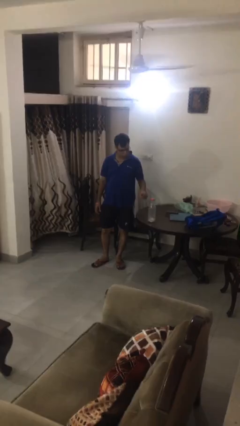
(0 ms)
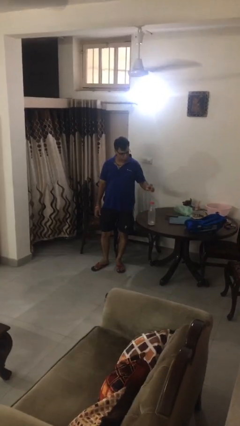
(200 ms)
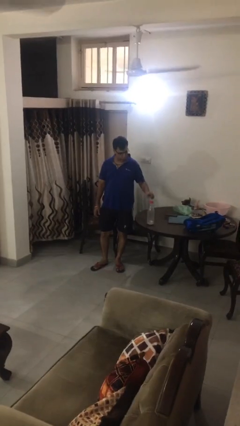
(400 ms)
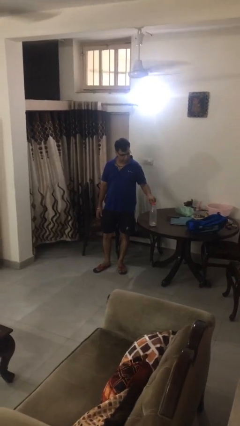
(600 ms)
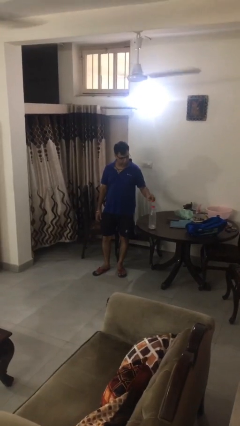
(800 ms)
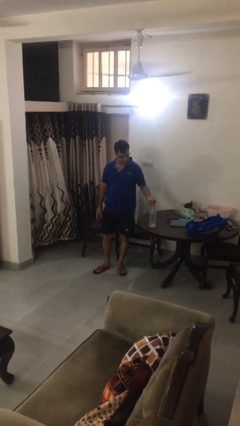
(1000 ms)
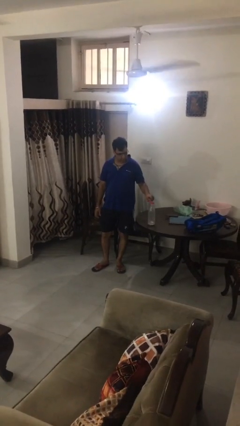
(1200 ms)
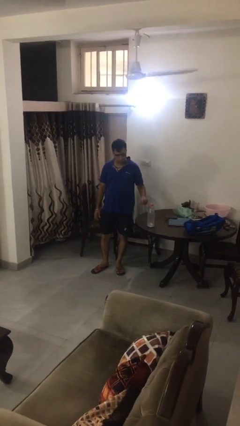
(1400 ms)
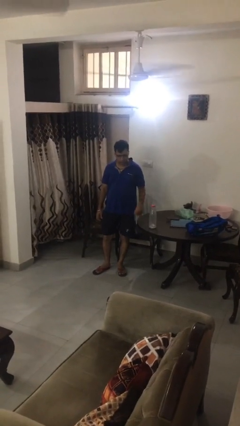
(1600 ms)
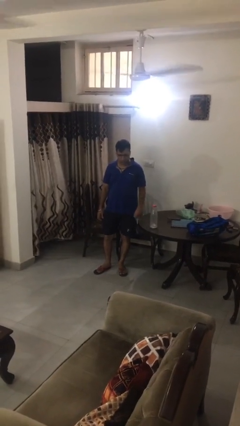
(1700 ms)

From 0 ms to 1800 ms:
person taps object with finger

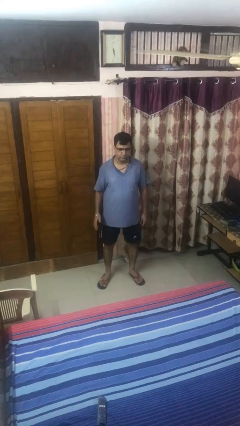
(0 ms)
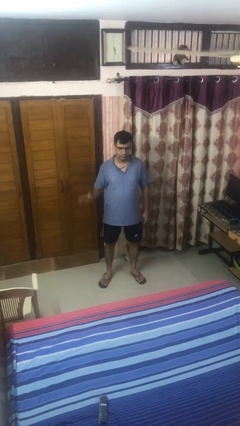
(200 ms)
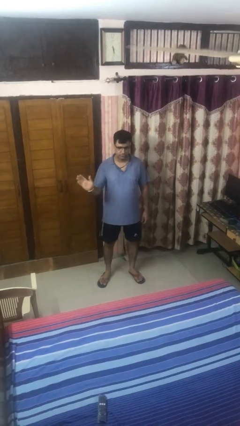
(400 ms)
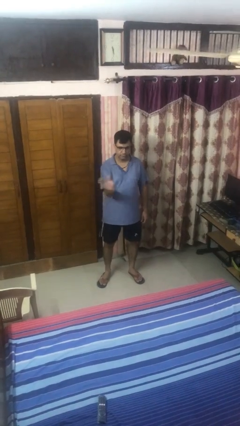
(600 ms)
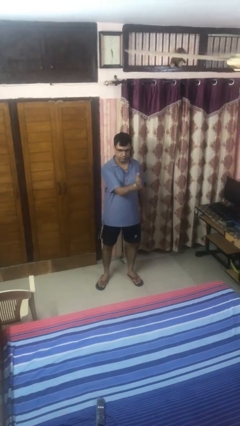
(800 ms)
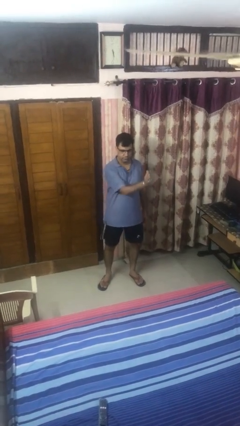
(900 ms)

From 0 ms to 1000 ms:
person gestures swipe left

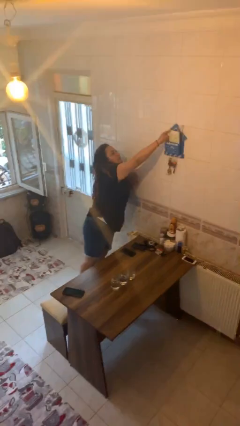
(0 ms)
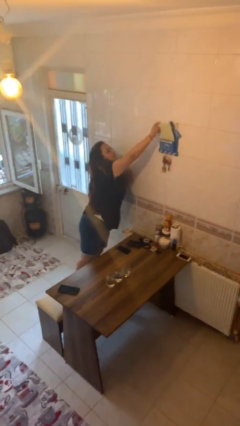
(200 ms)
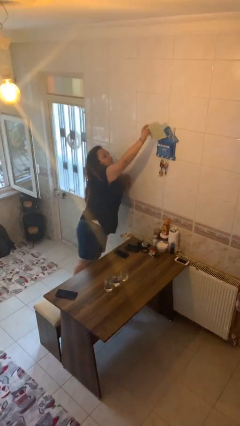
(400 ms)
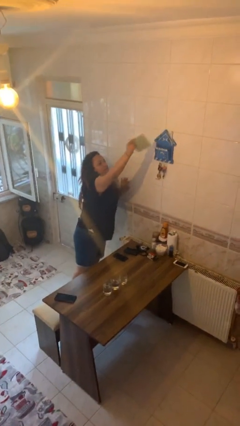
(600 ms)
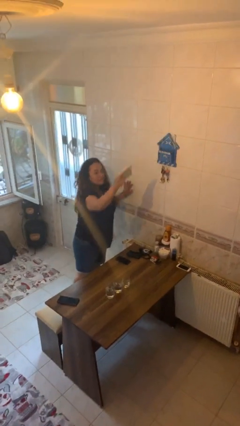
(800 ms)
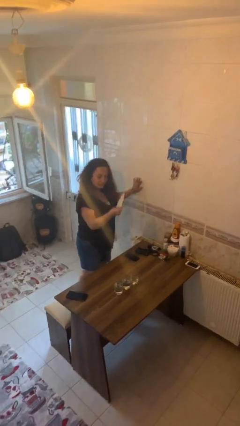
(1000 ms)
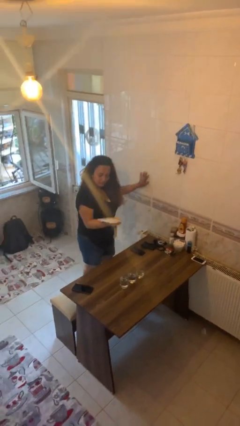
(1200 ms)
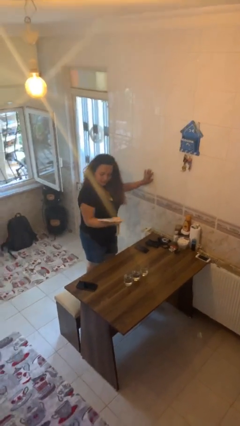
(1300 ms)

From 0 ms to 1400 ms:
person picks up object from shelf

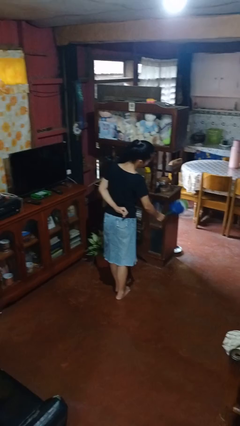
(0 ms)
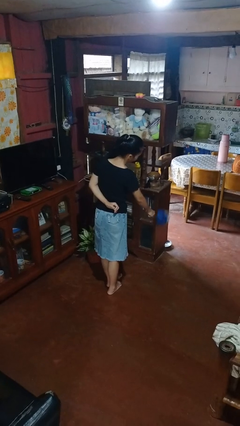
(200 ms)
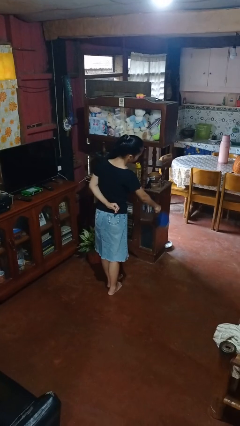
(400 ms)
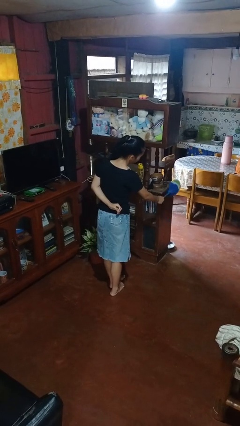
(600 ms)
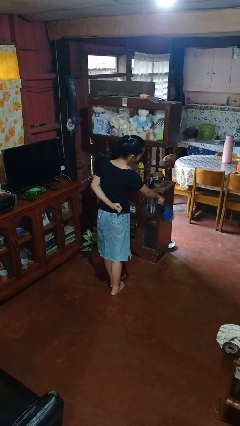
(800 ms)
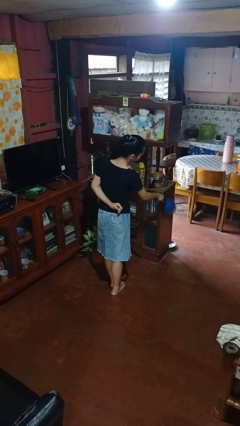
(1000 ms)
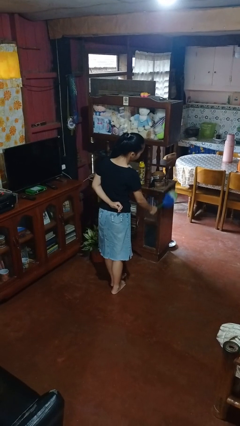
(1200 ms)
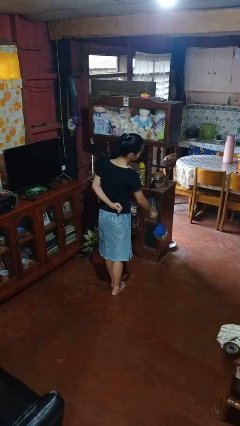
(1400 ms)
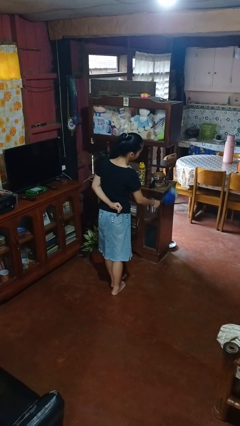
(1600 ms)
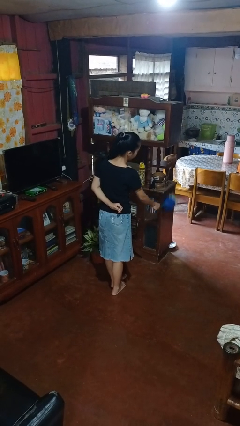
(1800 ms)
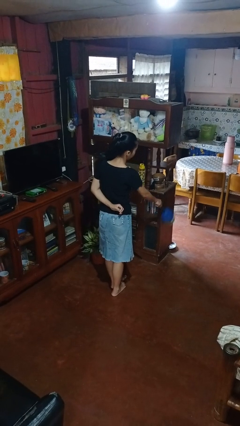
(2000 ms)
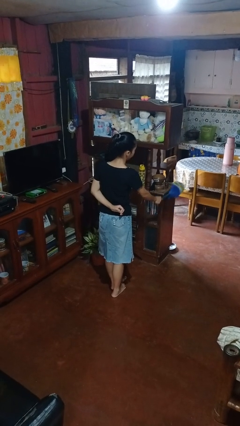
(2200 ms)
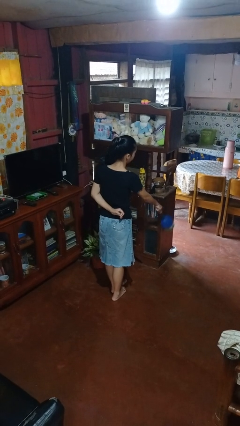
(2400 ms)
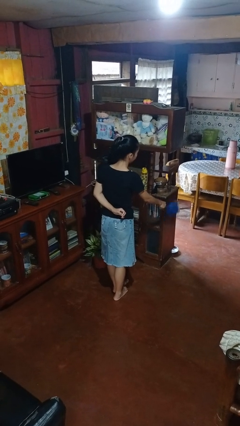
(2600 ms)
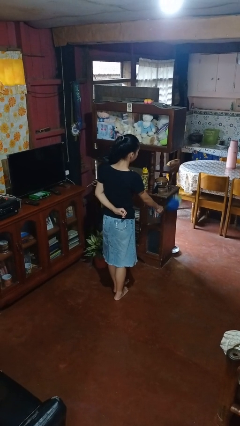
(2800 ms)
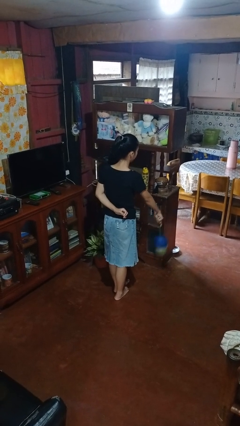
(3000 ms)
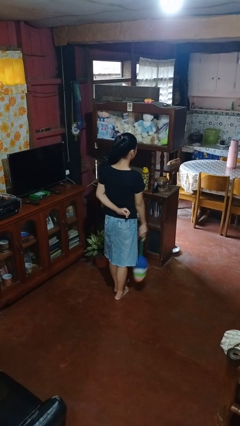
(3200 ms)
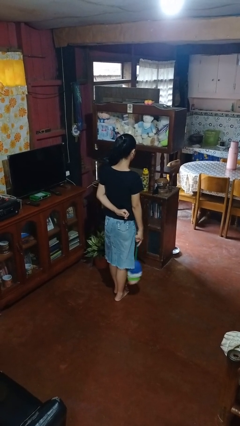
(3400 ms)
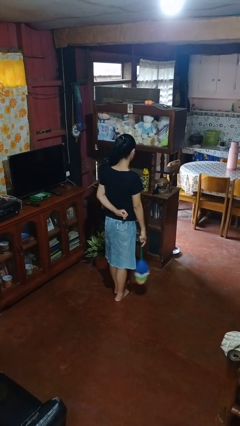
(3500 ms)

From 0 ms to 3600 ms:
person dusts furniture

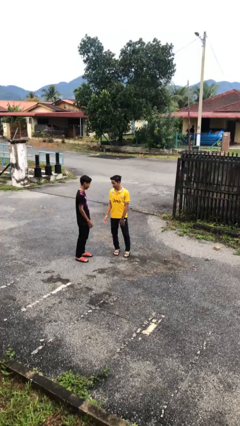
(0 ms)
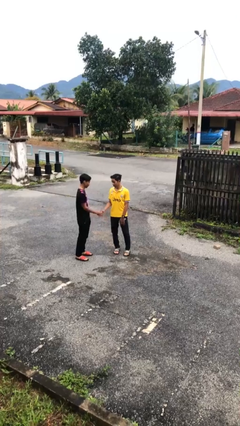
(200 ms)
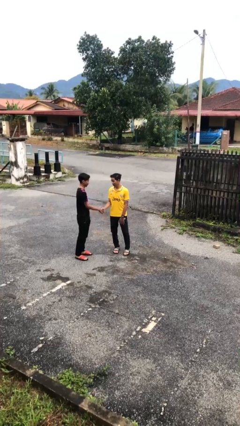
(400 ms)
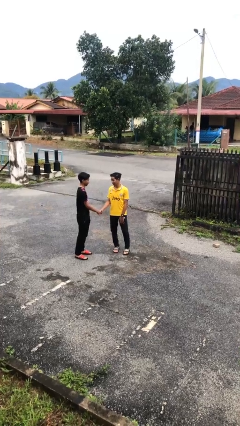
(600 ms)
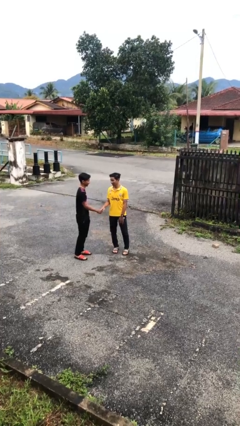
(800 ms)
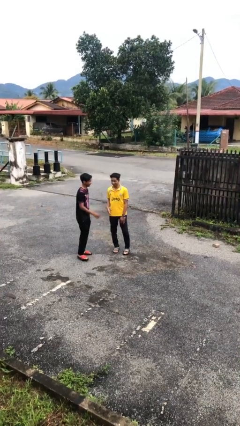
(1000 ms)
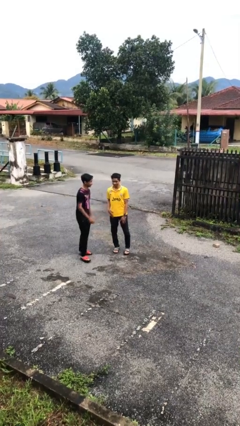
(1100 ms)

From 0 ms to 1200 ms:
person shakes hand

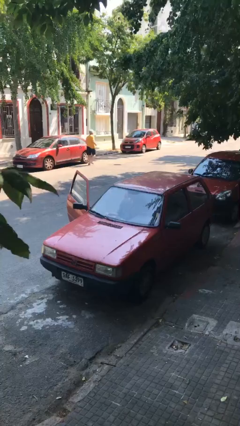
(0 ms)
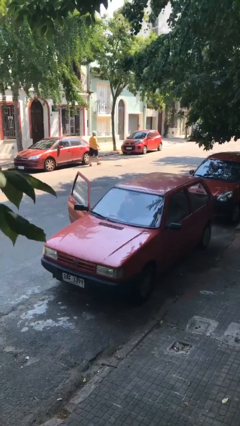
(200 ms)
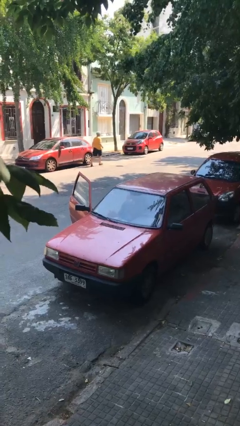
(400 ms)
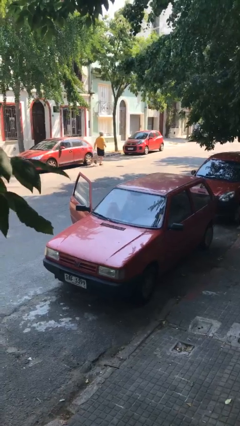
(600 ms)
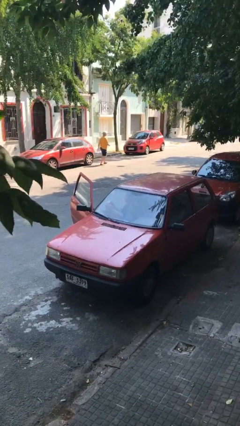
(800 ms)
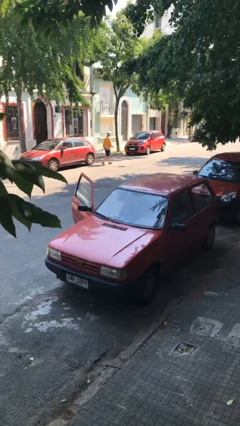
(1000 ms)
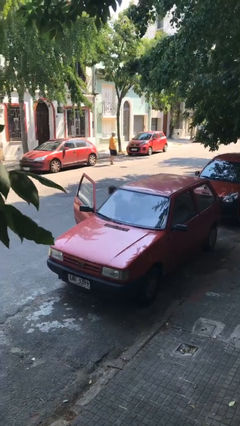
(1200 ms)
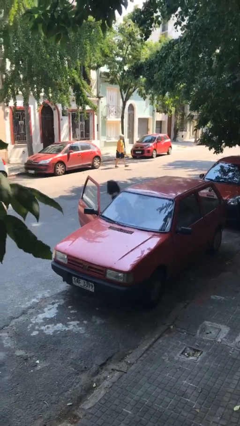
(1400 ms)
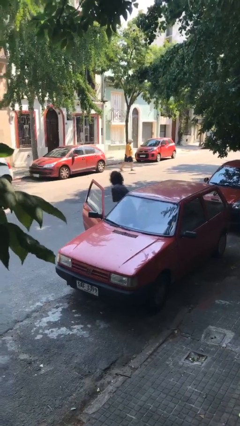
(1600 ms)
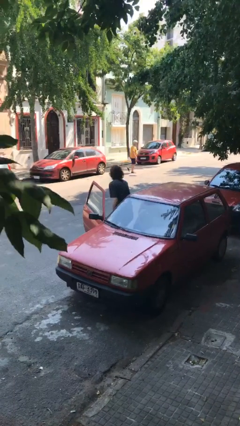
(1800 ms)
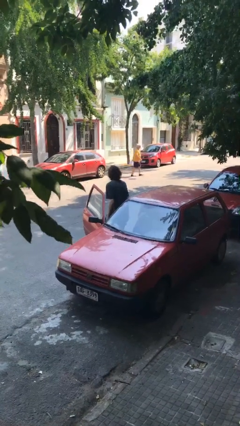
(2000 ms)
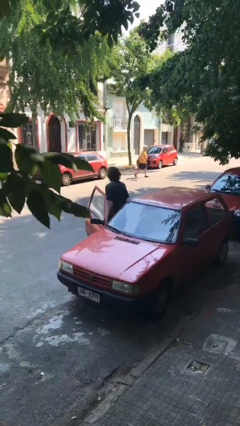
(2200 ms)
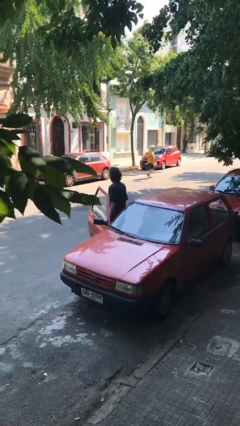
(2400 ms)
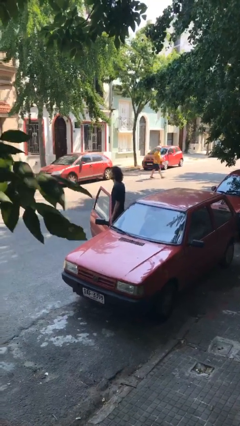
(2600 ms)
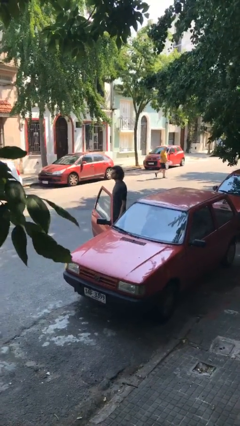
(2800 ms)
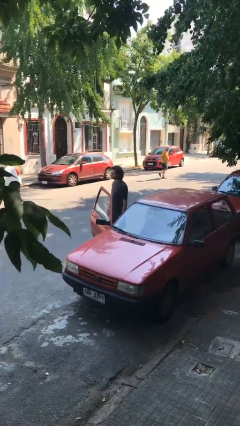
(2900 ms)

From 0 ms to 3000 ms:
person exits car

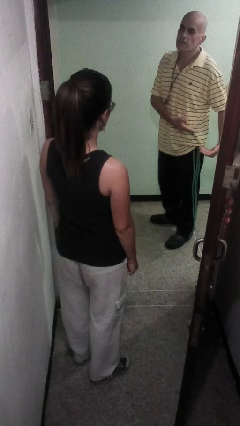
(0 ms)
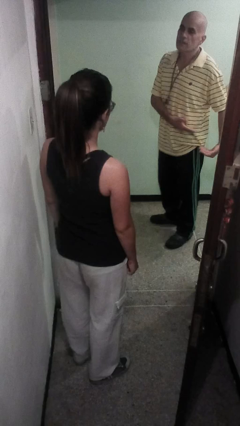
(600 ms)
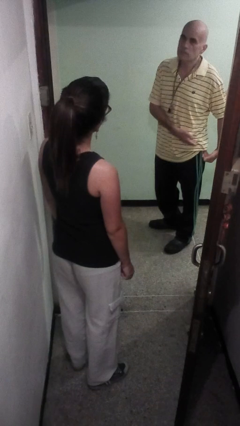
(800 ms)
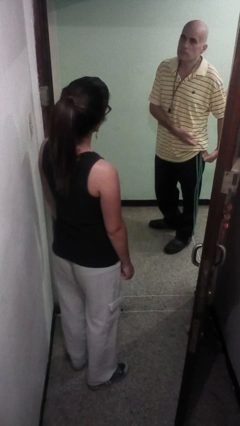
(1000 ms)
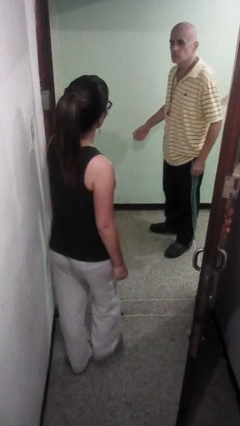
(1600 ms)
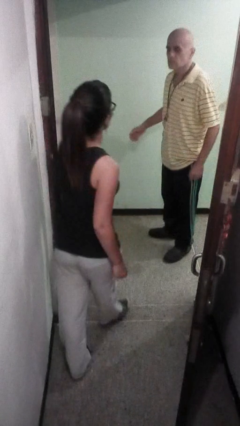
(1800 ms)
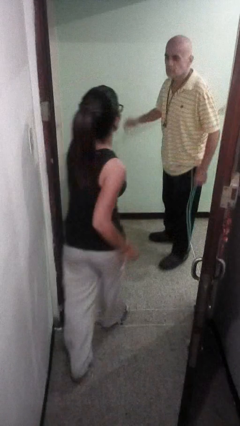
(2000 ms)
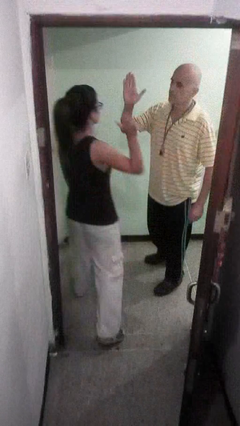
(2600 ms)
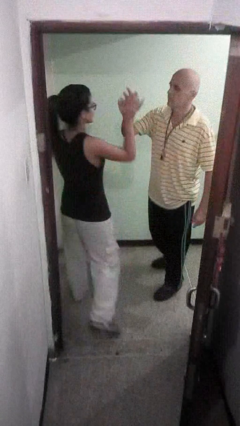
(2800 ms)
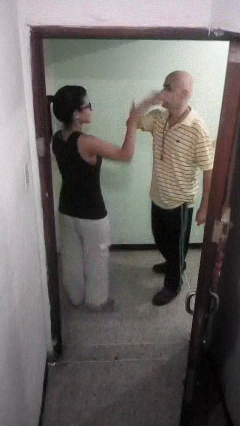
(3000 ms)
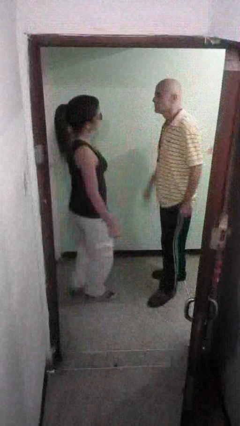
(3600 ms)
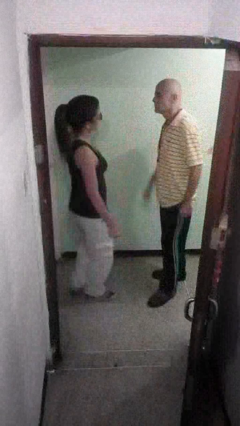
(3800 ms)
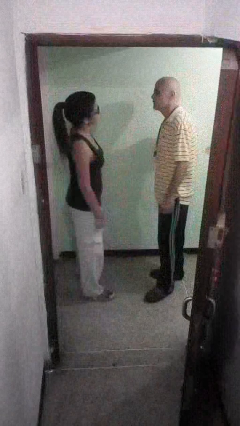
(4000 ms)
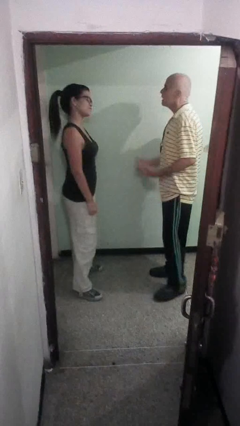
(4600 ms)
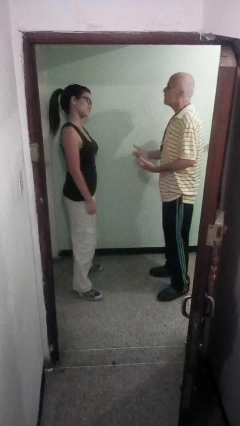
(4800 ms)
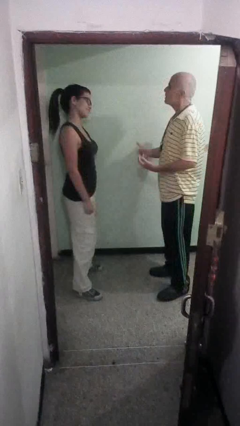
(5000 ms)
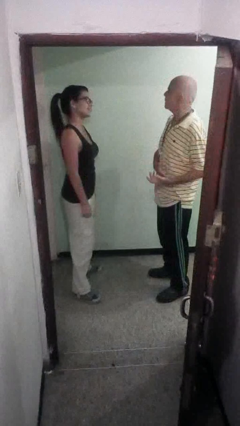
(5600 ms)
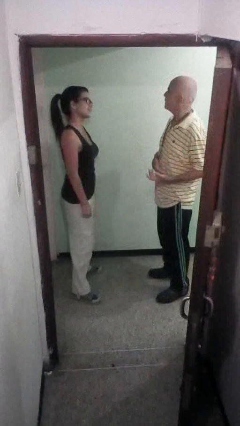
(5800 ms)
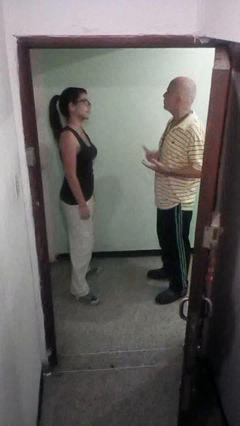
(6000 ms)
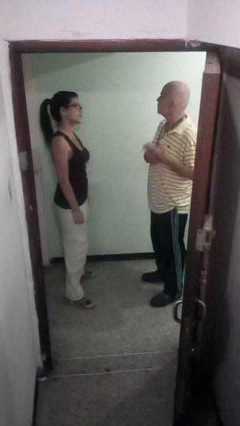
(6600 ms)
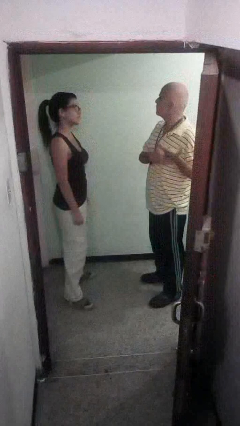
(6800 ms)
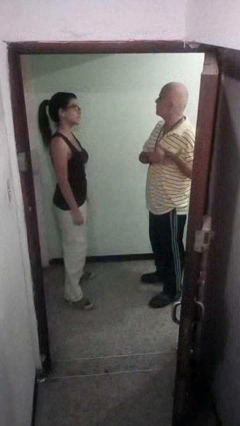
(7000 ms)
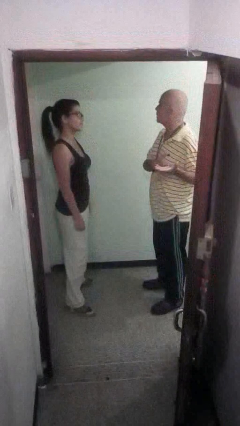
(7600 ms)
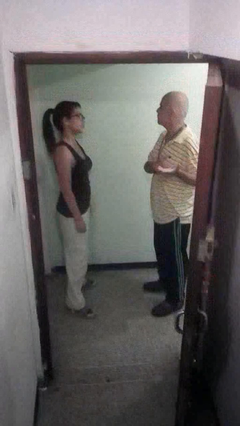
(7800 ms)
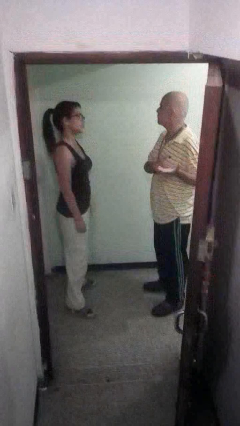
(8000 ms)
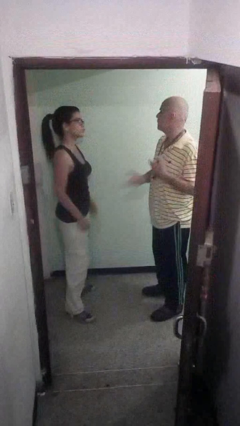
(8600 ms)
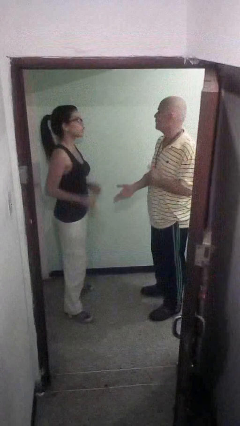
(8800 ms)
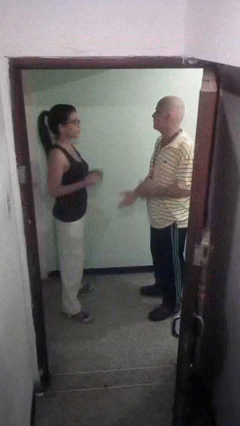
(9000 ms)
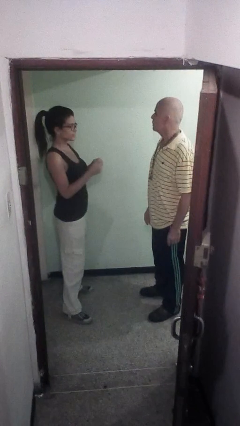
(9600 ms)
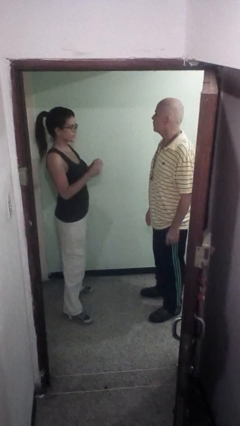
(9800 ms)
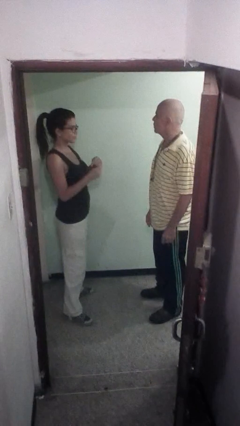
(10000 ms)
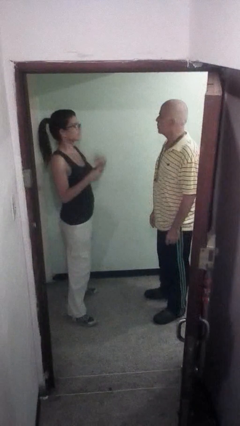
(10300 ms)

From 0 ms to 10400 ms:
person highfives hand
